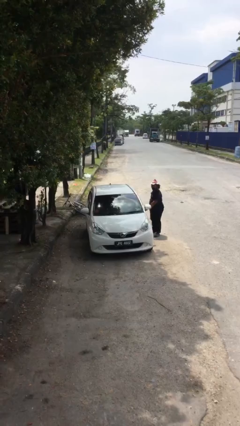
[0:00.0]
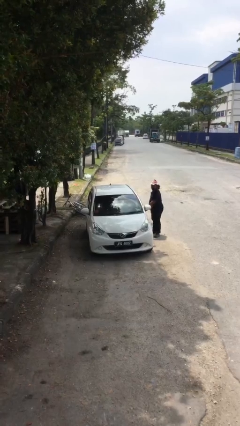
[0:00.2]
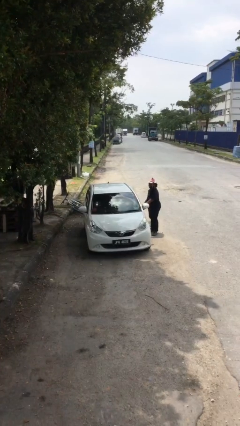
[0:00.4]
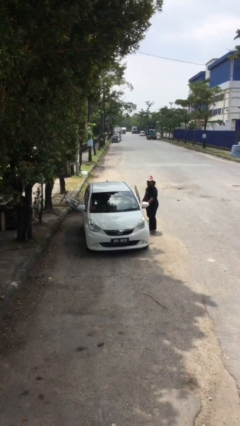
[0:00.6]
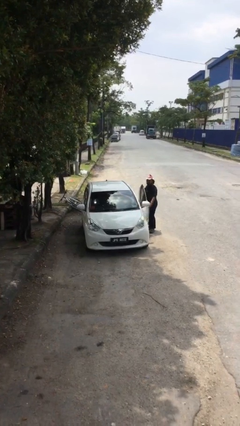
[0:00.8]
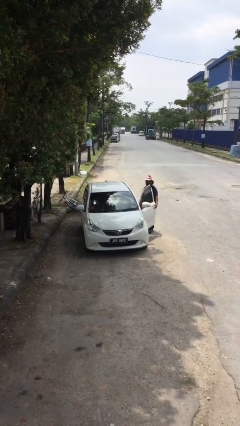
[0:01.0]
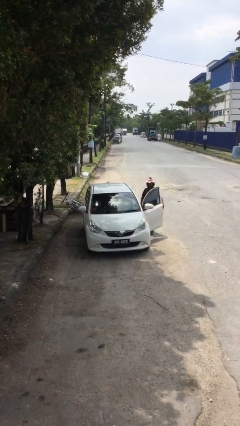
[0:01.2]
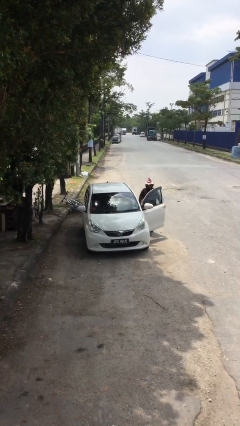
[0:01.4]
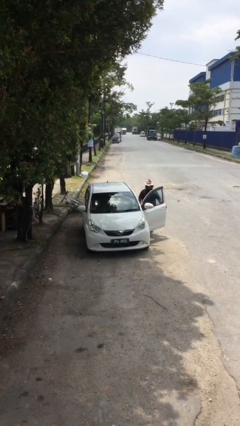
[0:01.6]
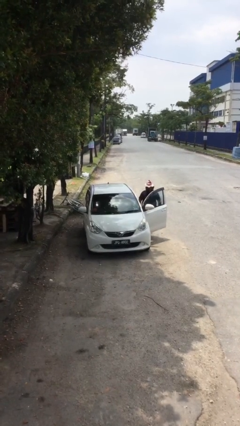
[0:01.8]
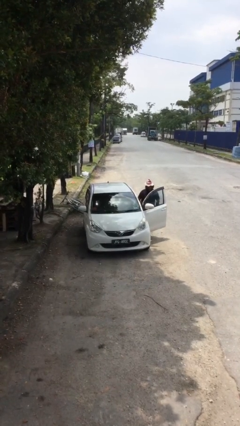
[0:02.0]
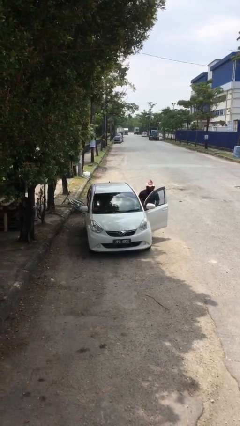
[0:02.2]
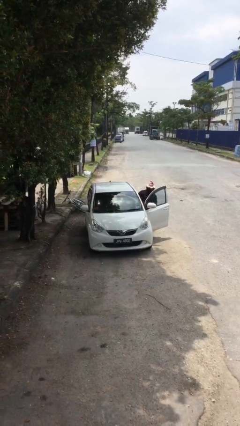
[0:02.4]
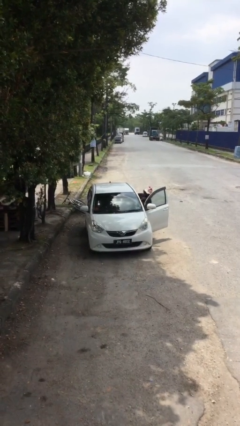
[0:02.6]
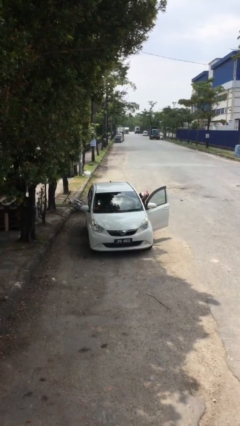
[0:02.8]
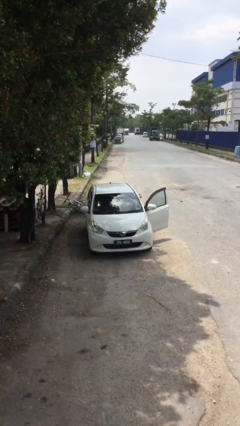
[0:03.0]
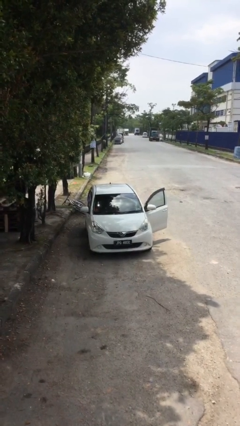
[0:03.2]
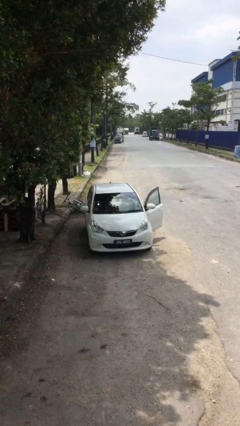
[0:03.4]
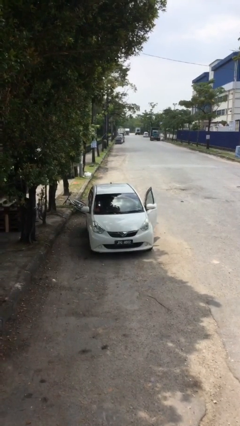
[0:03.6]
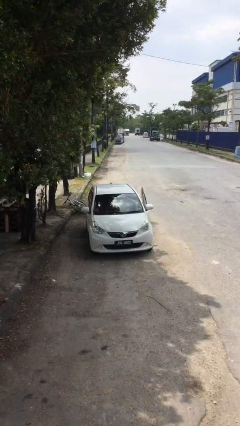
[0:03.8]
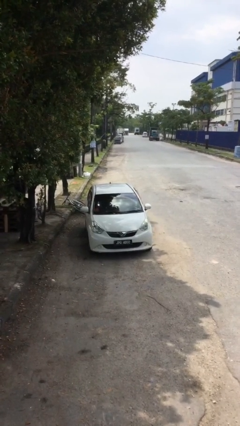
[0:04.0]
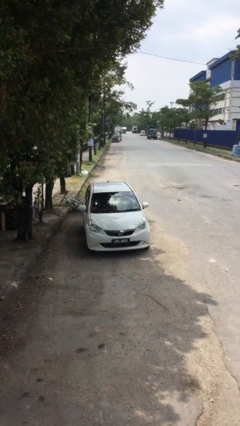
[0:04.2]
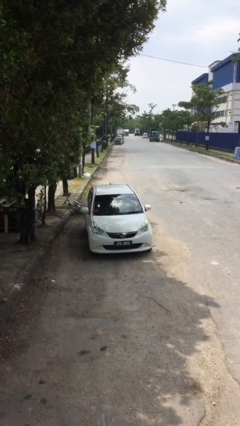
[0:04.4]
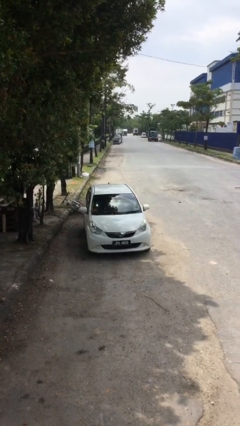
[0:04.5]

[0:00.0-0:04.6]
car picks up person

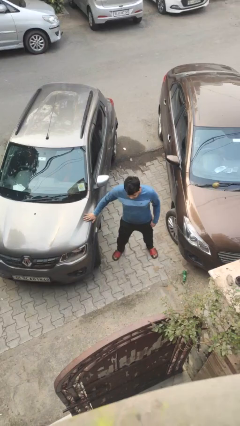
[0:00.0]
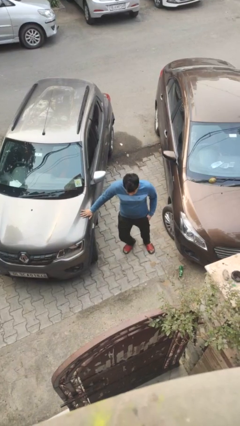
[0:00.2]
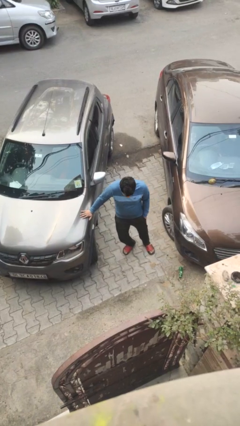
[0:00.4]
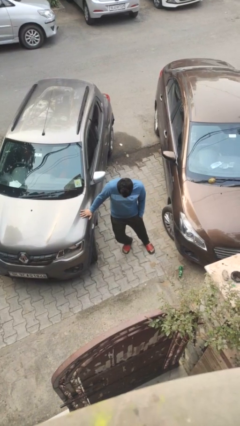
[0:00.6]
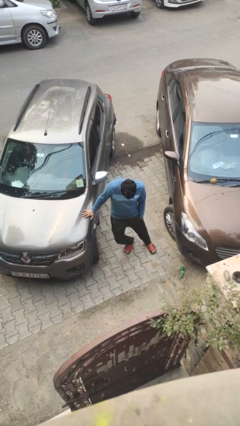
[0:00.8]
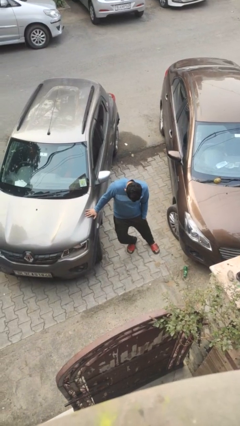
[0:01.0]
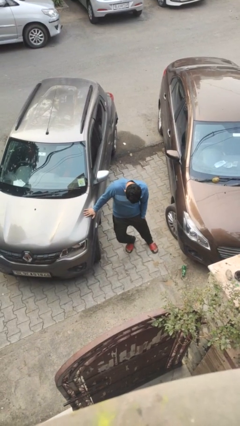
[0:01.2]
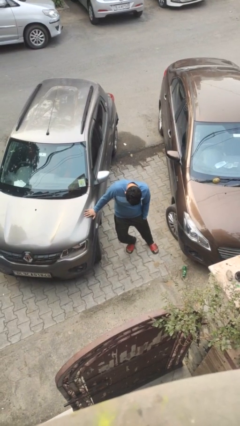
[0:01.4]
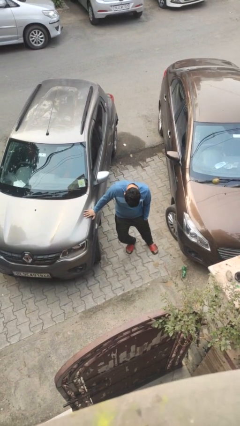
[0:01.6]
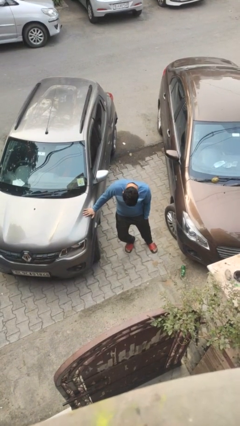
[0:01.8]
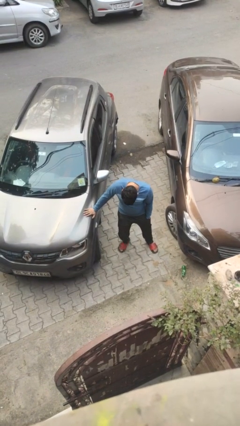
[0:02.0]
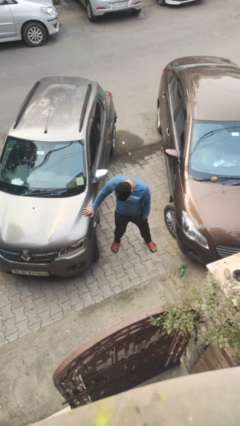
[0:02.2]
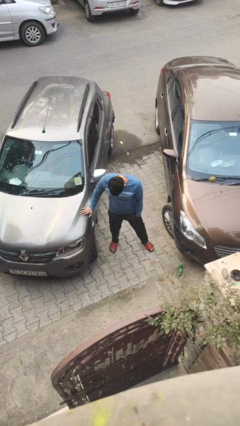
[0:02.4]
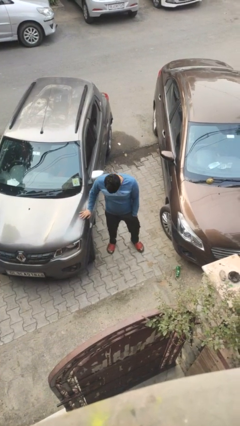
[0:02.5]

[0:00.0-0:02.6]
person leans against car

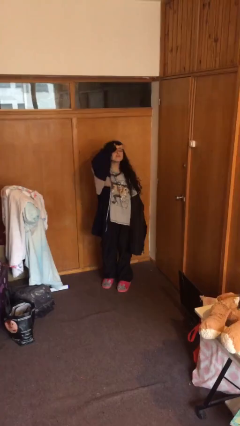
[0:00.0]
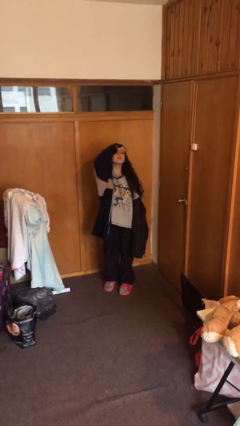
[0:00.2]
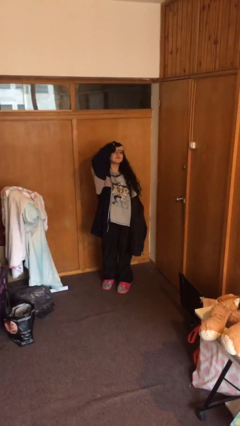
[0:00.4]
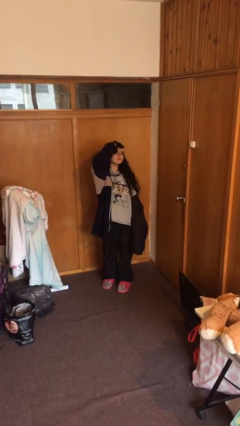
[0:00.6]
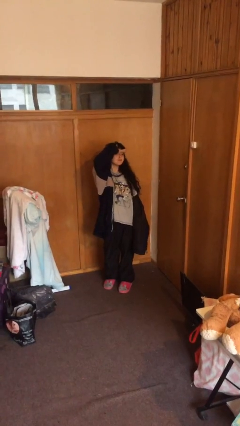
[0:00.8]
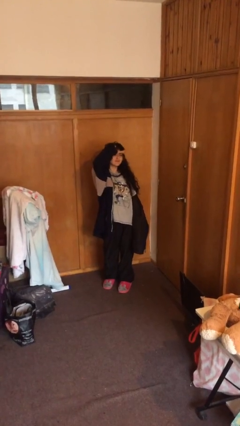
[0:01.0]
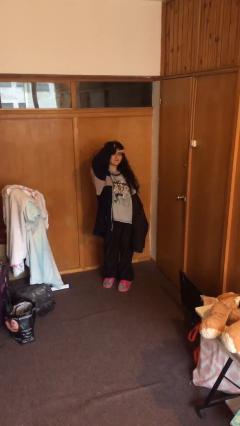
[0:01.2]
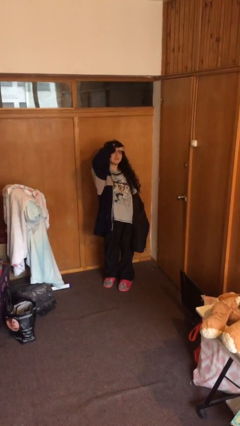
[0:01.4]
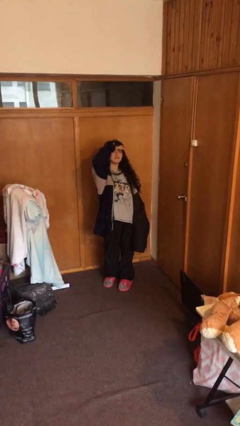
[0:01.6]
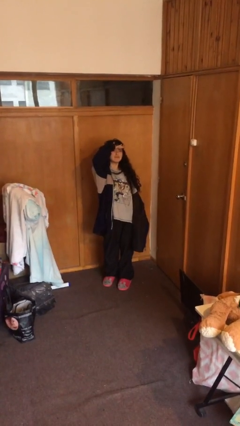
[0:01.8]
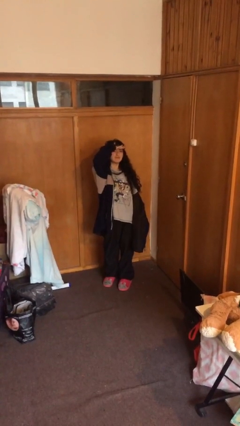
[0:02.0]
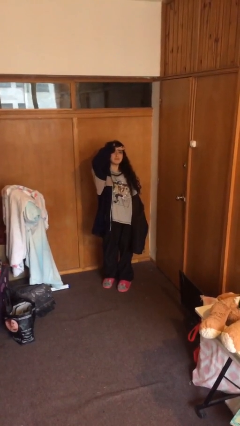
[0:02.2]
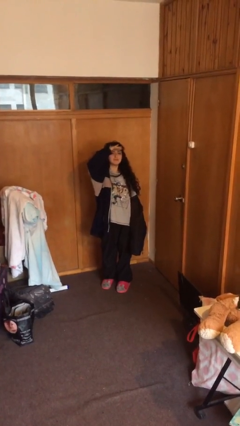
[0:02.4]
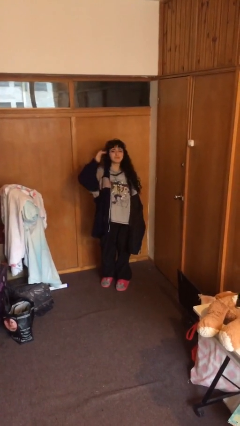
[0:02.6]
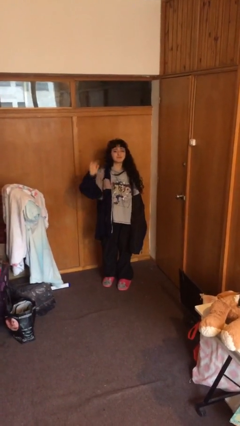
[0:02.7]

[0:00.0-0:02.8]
person shades eyes

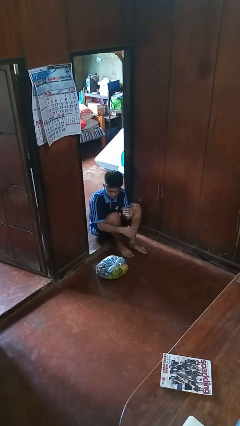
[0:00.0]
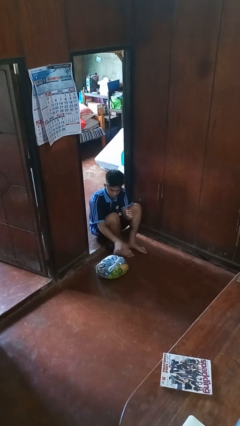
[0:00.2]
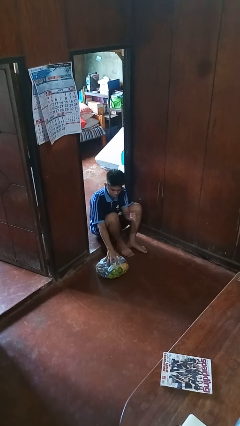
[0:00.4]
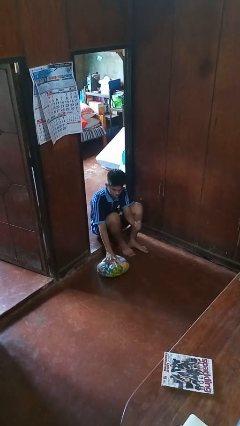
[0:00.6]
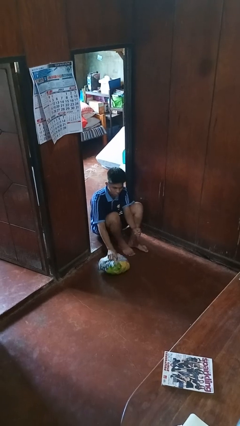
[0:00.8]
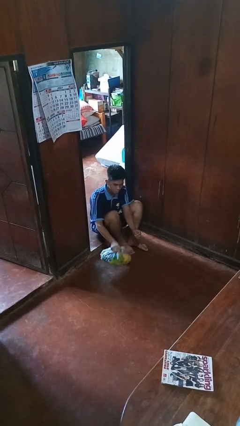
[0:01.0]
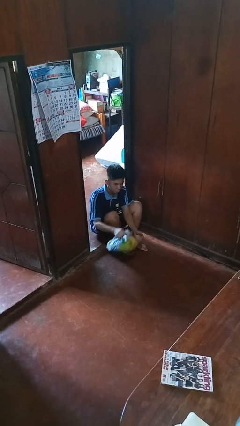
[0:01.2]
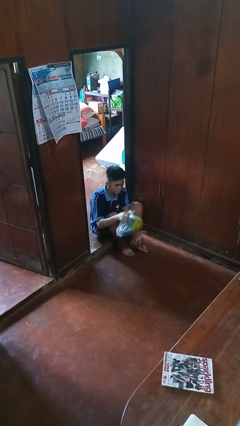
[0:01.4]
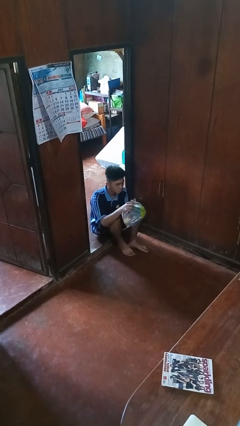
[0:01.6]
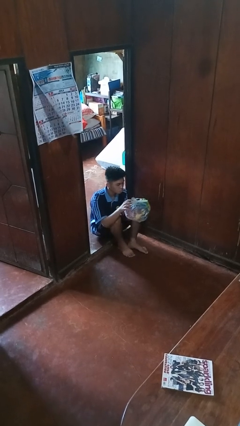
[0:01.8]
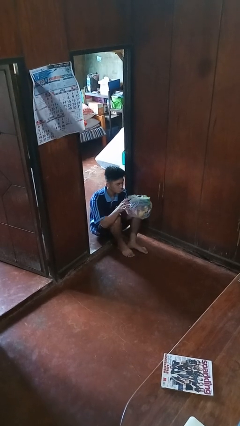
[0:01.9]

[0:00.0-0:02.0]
person picks up object from floor

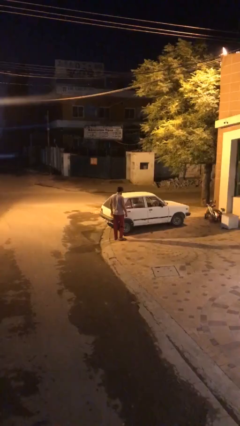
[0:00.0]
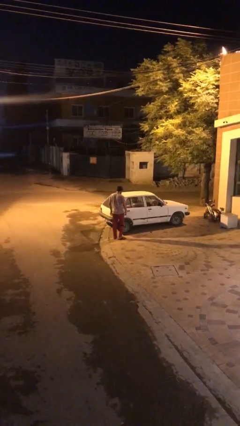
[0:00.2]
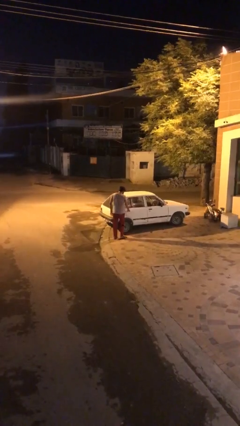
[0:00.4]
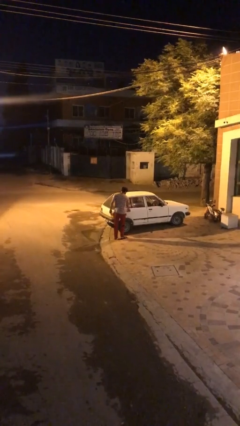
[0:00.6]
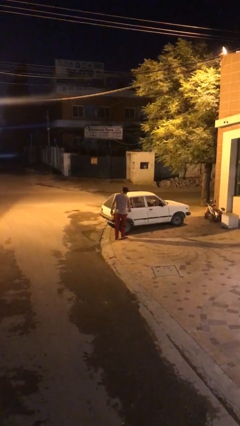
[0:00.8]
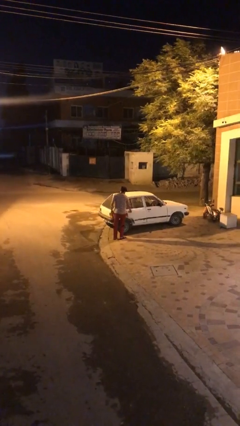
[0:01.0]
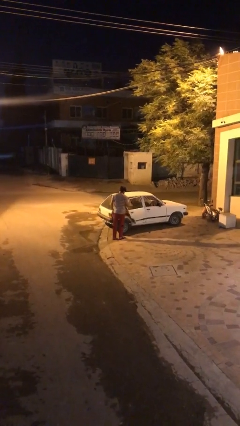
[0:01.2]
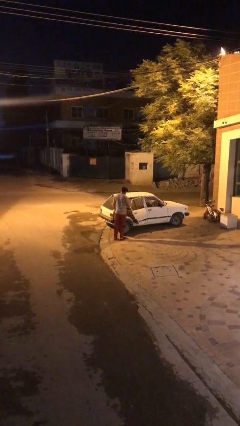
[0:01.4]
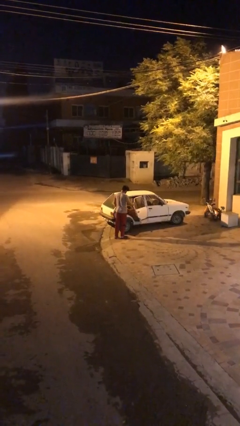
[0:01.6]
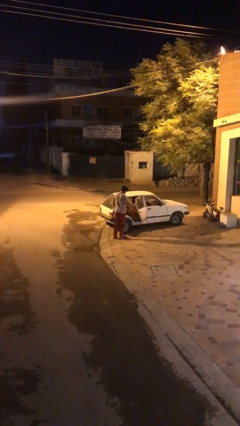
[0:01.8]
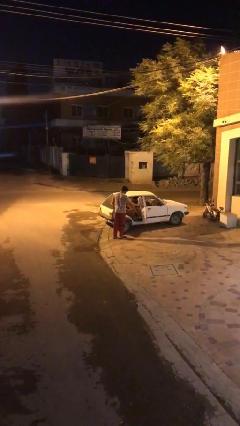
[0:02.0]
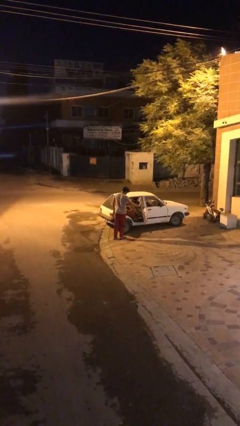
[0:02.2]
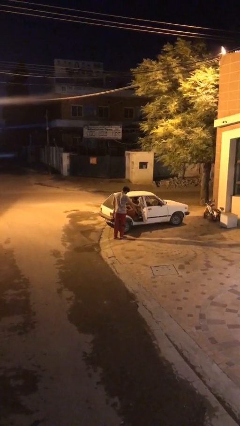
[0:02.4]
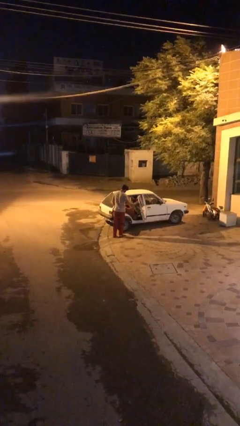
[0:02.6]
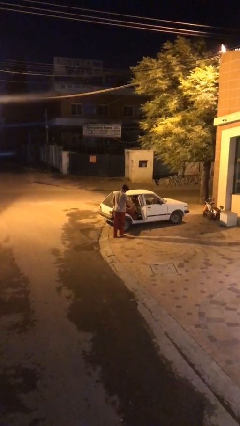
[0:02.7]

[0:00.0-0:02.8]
person opens car door

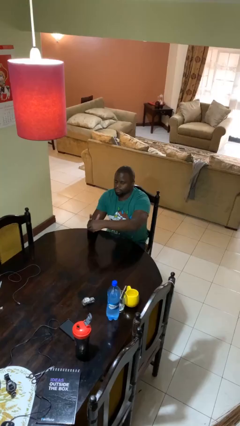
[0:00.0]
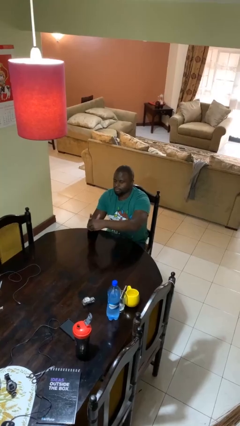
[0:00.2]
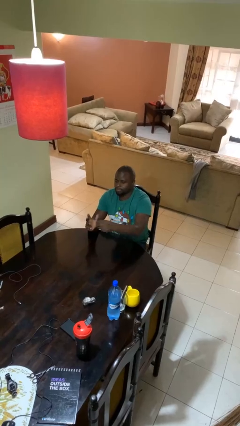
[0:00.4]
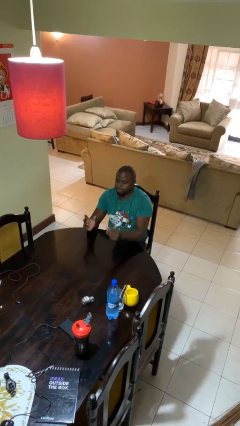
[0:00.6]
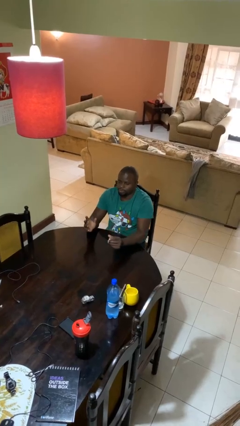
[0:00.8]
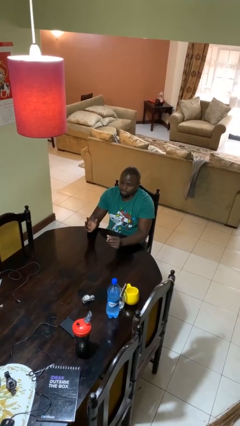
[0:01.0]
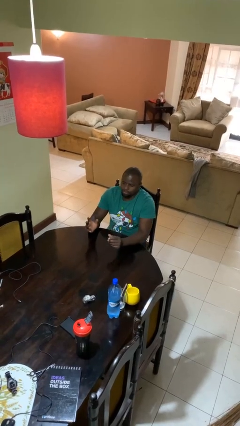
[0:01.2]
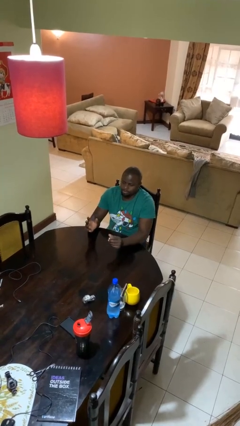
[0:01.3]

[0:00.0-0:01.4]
person takes off ring

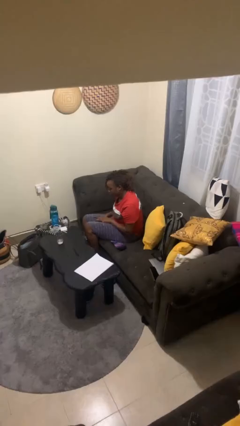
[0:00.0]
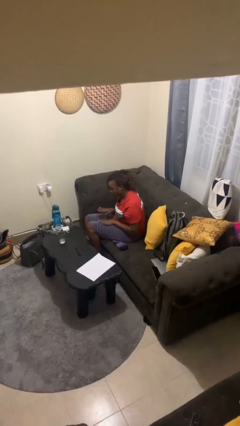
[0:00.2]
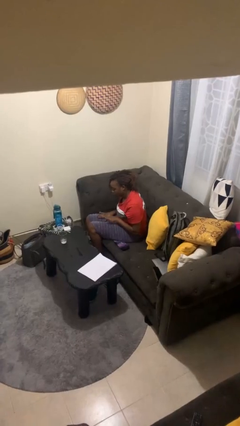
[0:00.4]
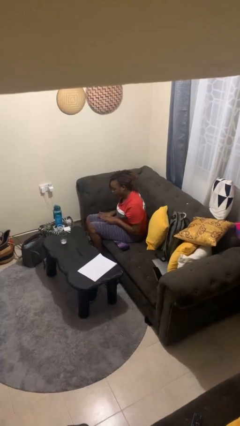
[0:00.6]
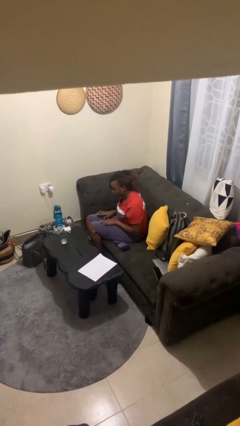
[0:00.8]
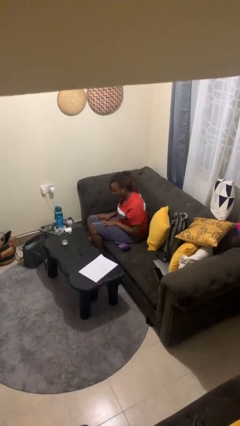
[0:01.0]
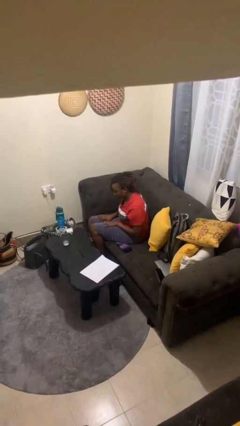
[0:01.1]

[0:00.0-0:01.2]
person slaps hands on thighs
